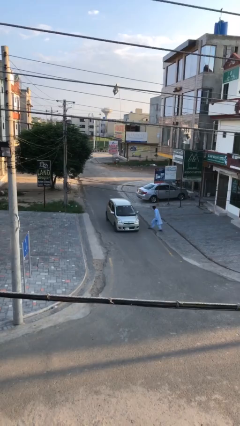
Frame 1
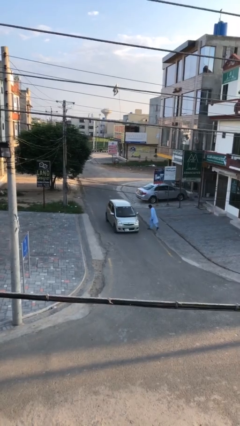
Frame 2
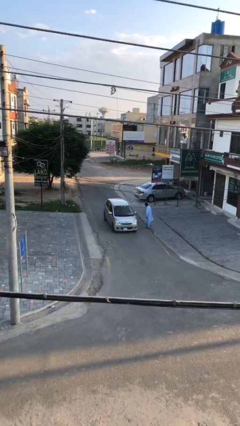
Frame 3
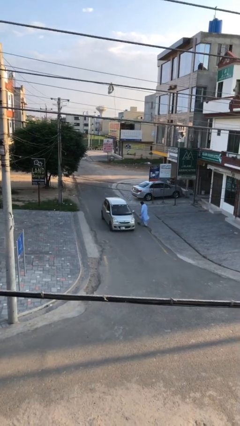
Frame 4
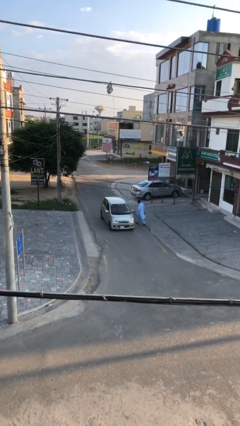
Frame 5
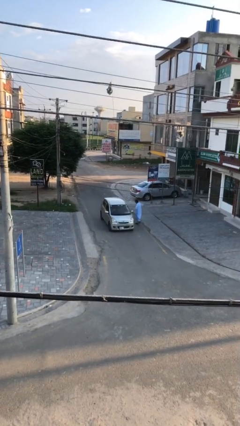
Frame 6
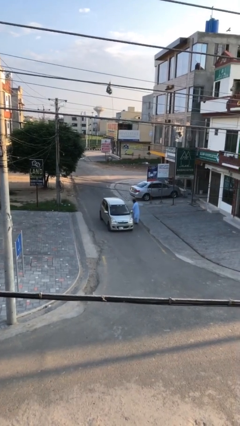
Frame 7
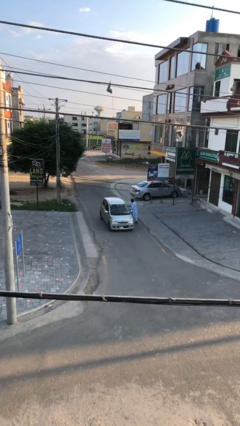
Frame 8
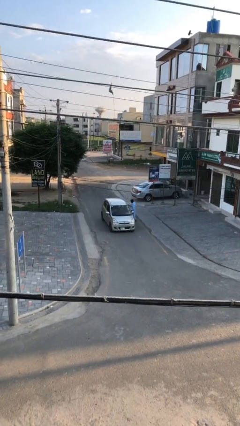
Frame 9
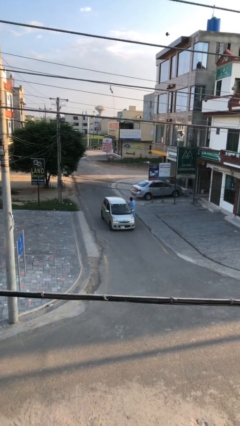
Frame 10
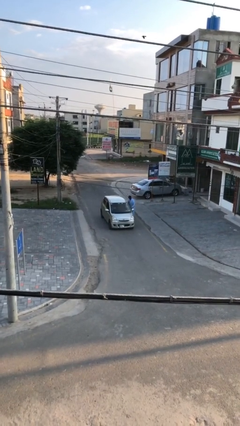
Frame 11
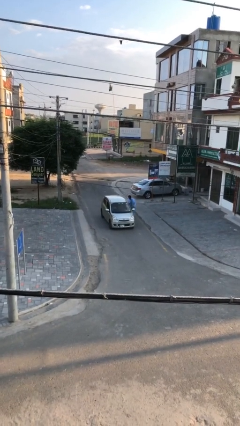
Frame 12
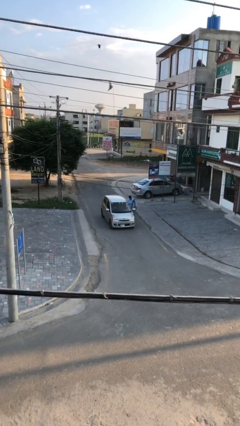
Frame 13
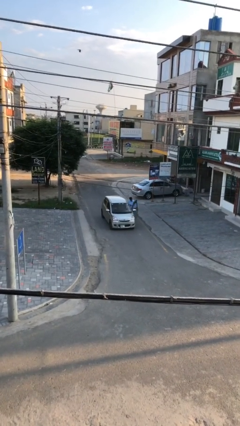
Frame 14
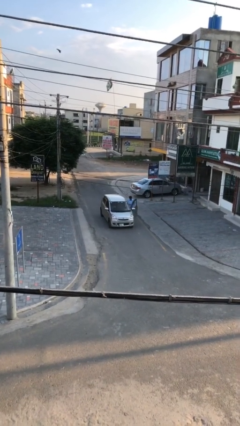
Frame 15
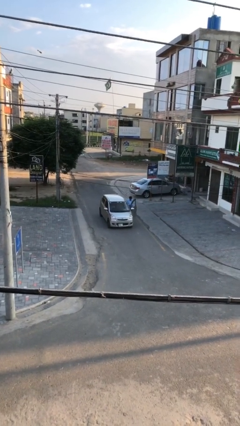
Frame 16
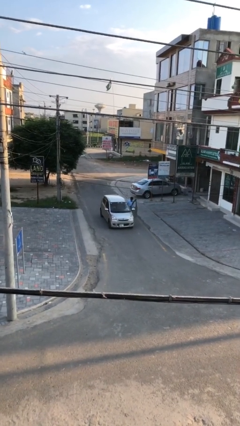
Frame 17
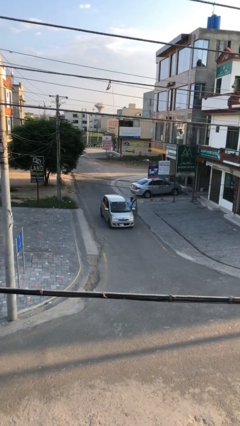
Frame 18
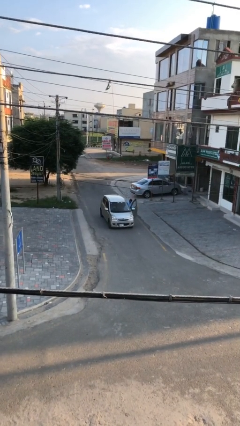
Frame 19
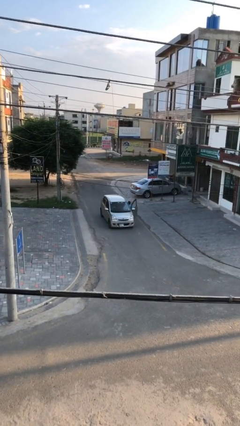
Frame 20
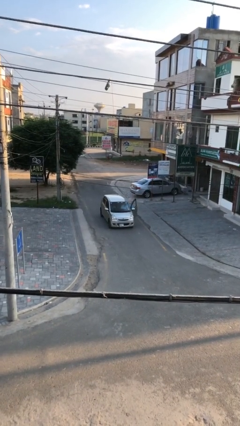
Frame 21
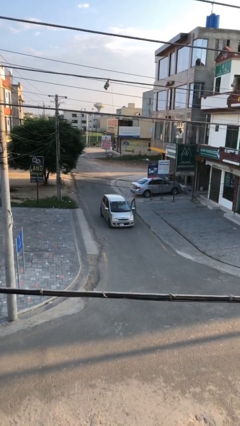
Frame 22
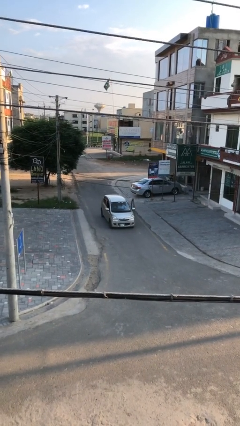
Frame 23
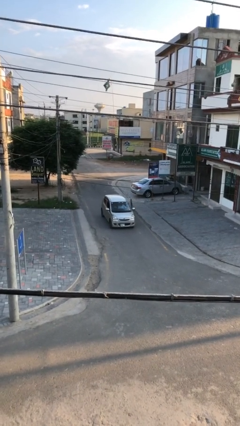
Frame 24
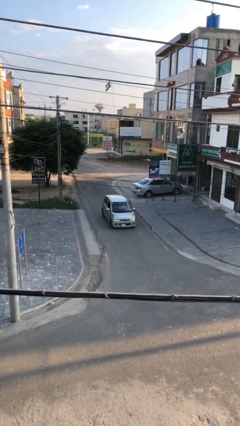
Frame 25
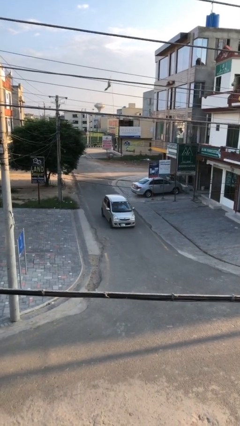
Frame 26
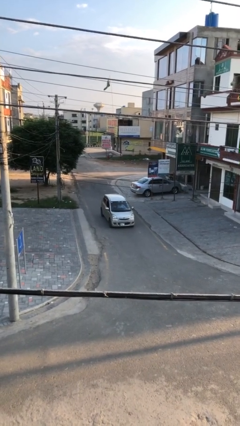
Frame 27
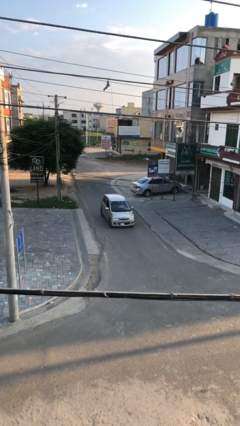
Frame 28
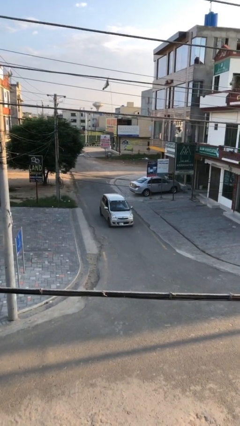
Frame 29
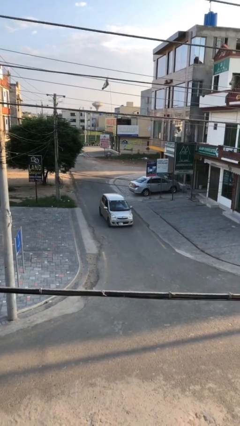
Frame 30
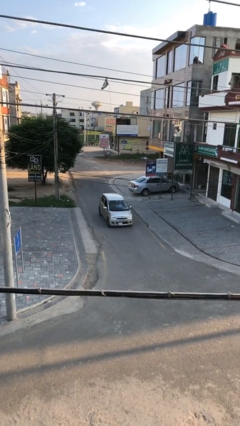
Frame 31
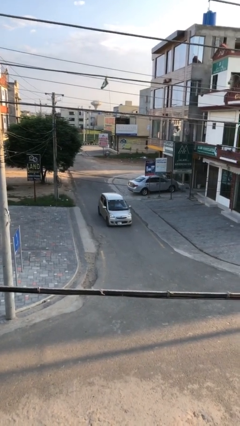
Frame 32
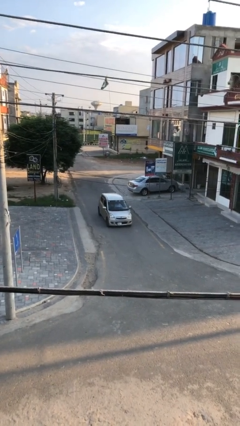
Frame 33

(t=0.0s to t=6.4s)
car picks up person

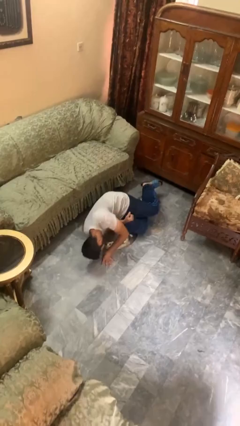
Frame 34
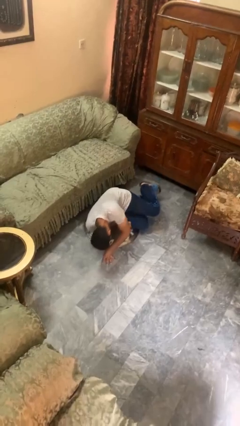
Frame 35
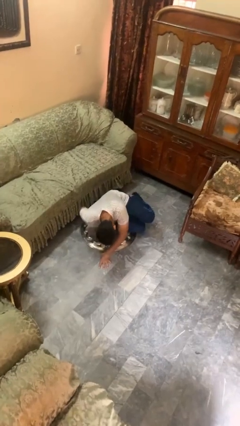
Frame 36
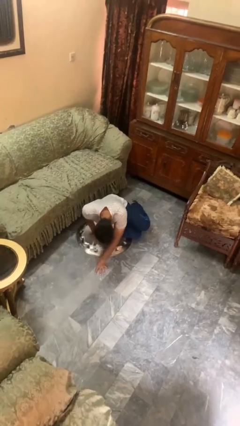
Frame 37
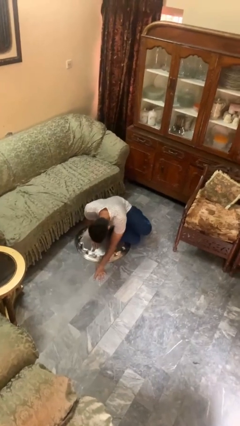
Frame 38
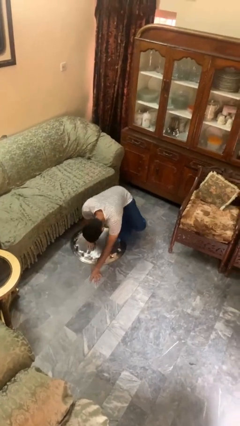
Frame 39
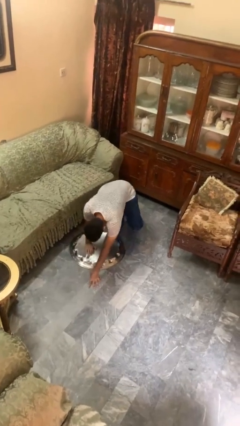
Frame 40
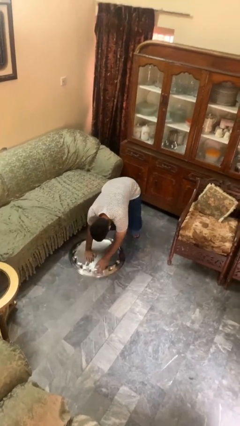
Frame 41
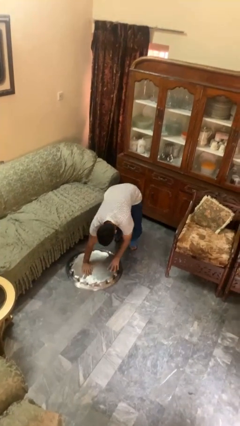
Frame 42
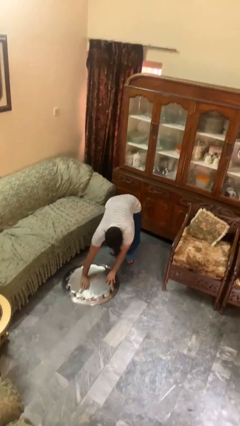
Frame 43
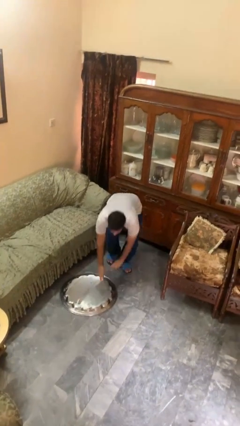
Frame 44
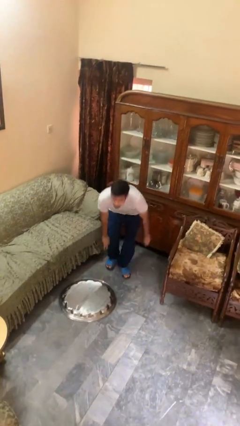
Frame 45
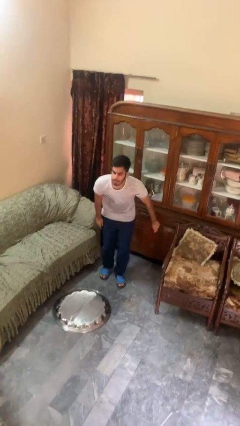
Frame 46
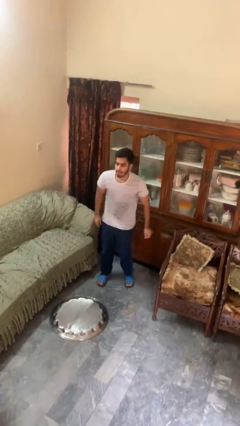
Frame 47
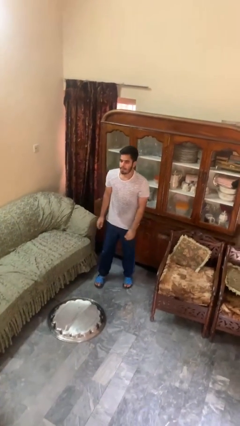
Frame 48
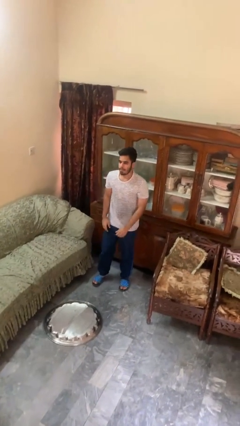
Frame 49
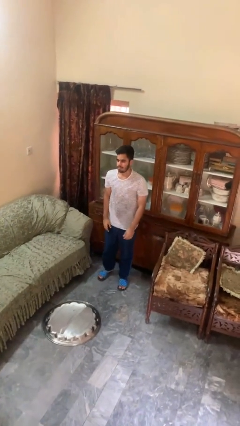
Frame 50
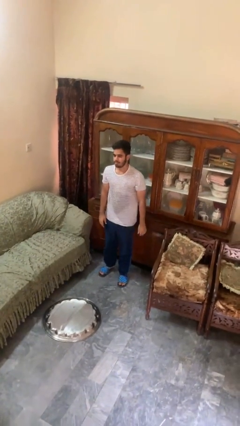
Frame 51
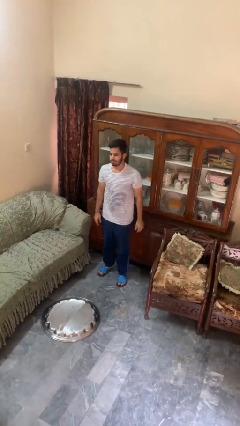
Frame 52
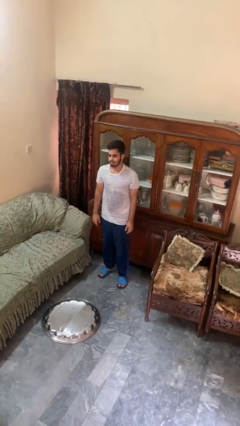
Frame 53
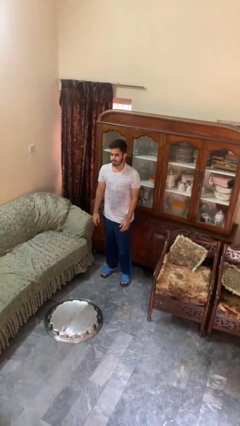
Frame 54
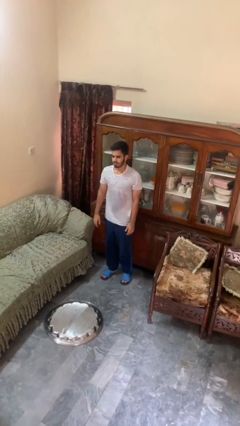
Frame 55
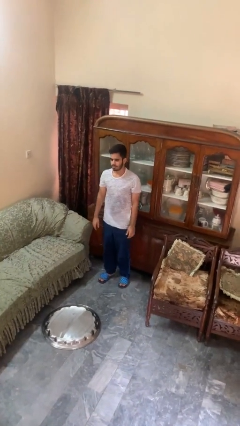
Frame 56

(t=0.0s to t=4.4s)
person stands up from floor

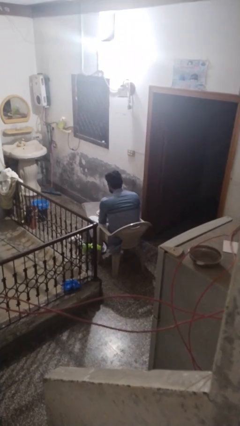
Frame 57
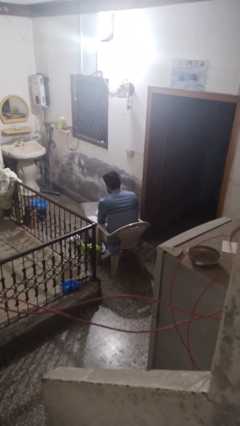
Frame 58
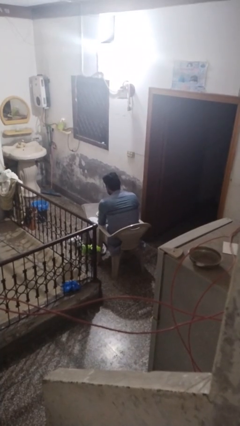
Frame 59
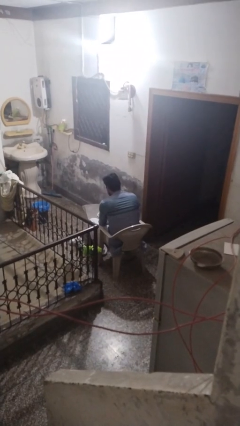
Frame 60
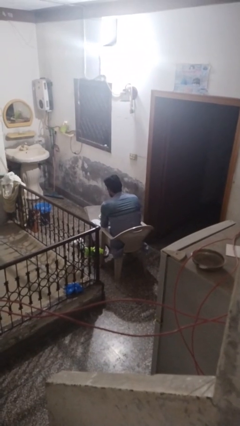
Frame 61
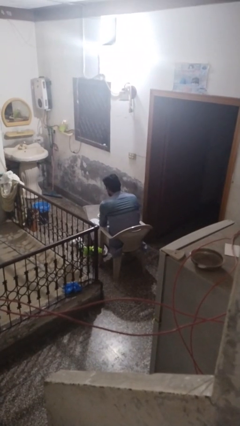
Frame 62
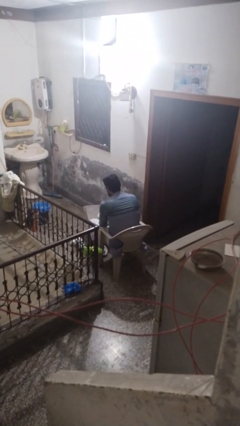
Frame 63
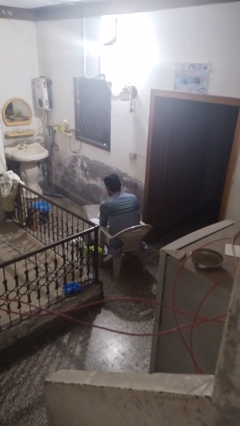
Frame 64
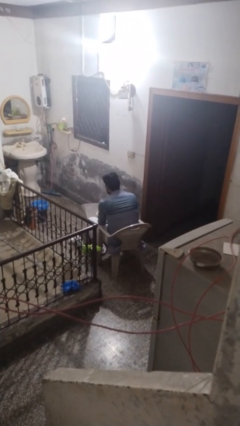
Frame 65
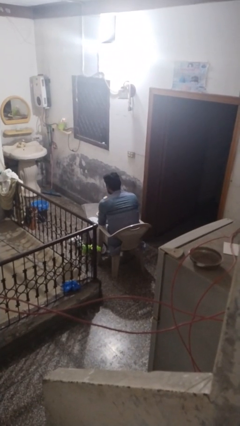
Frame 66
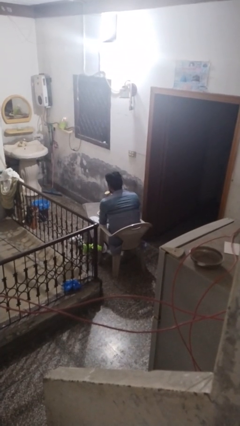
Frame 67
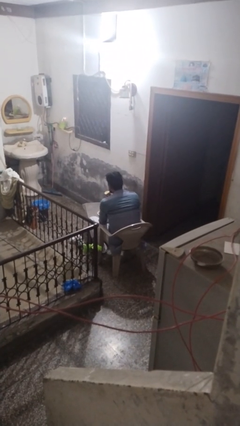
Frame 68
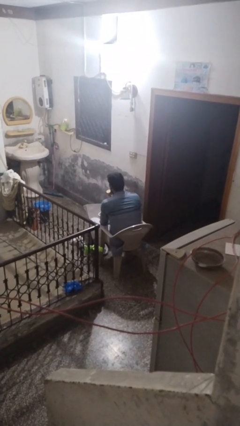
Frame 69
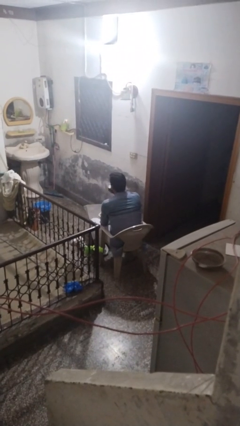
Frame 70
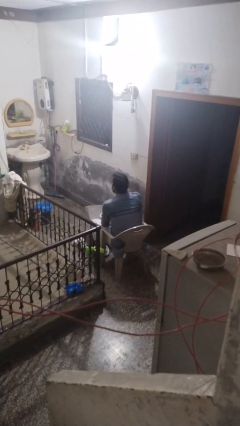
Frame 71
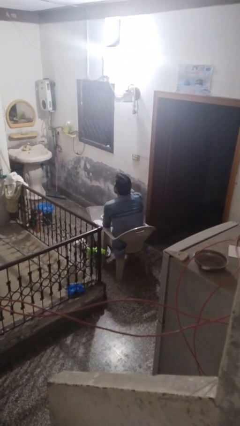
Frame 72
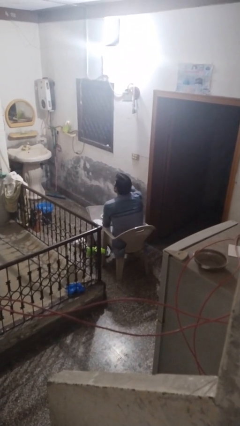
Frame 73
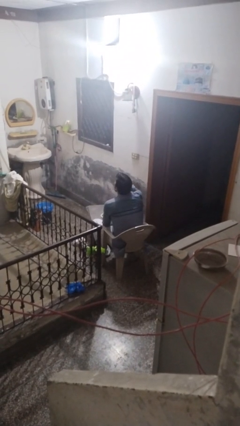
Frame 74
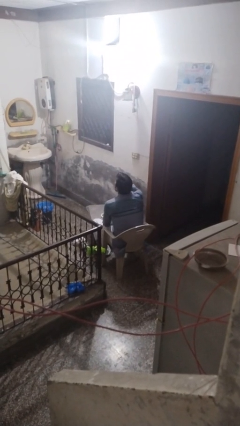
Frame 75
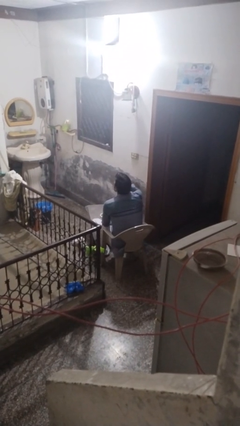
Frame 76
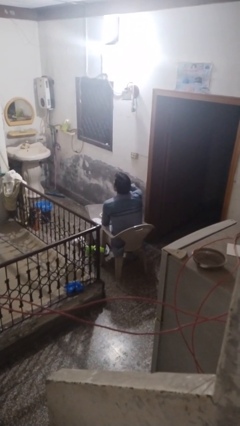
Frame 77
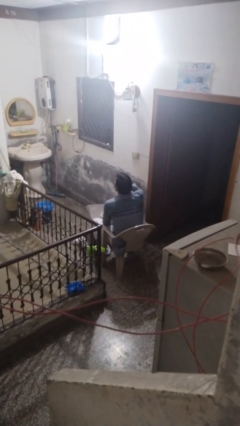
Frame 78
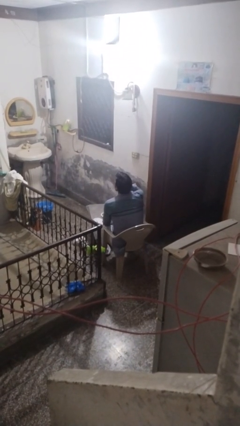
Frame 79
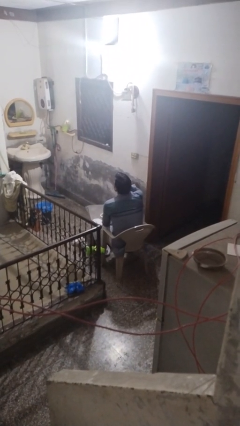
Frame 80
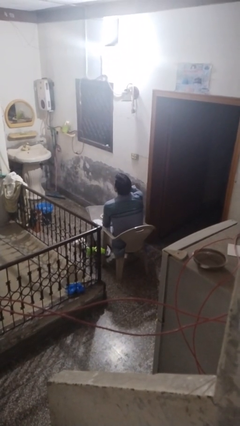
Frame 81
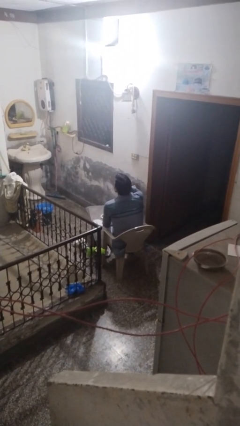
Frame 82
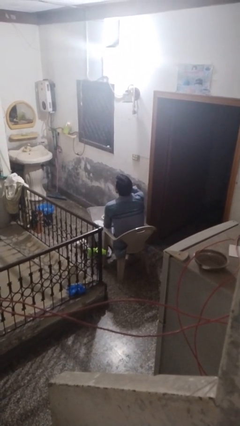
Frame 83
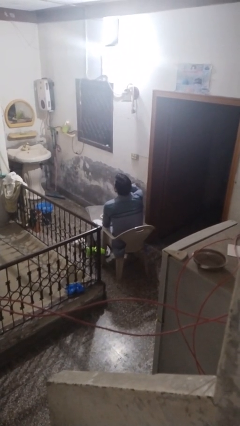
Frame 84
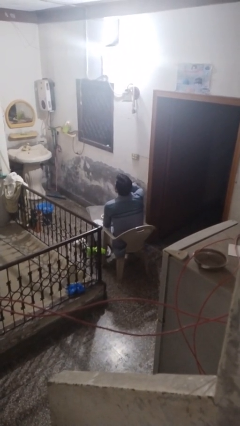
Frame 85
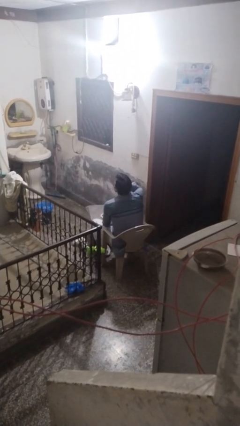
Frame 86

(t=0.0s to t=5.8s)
person eats with hands

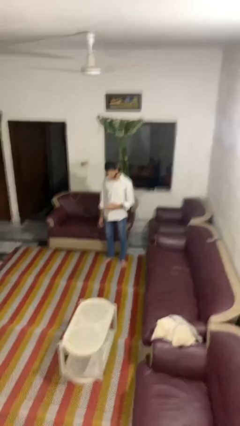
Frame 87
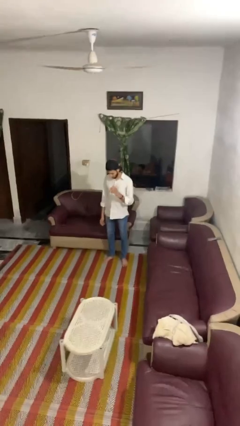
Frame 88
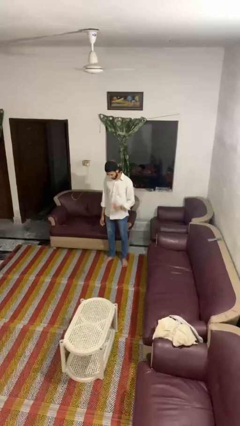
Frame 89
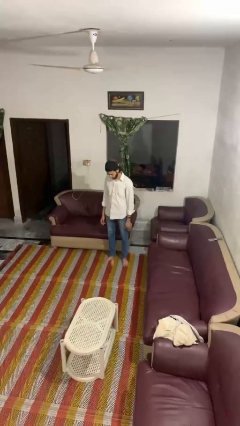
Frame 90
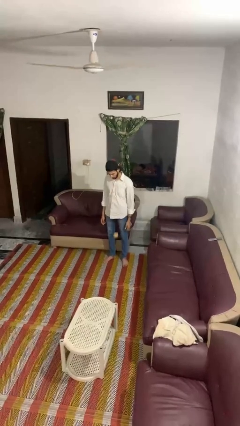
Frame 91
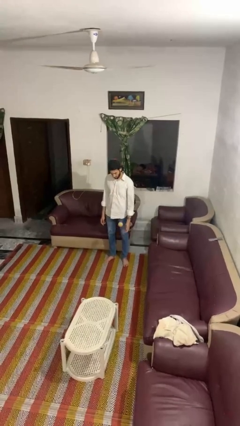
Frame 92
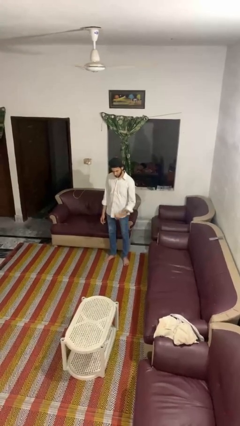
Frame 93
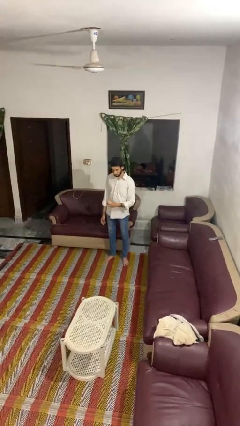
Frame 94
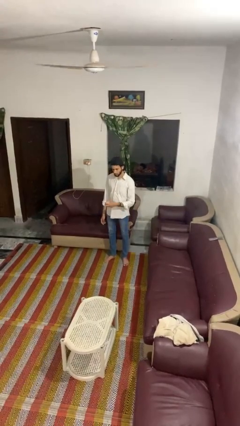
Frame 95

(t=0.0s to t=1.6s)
person bounces ball on floor
